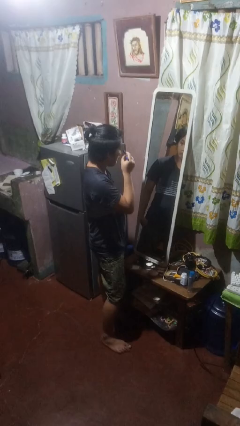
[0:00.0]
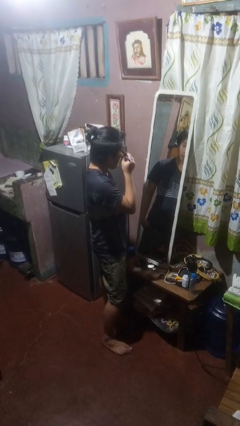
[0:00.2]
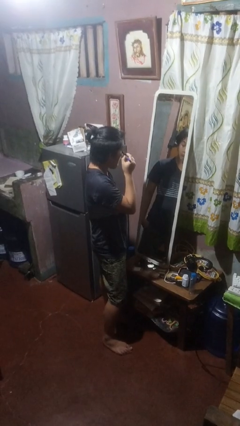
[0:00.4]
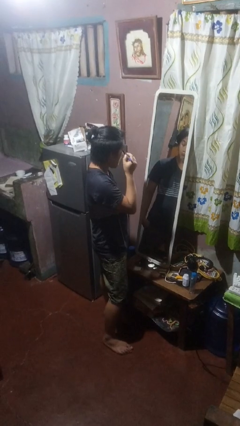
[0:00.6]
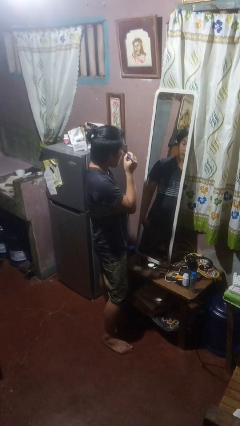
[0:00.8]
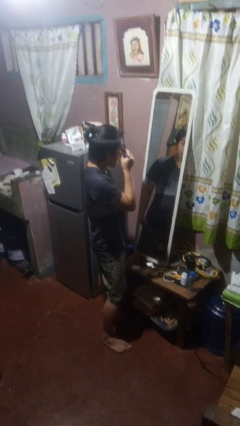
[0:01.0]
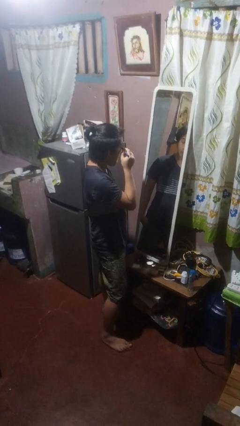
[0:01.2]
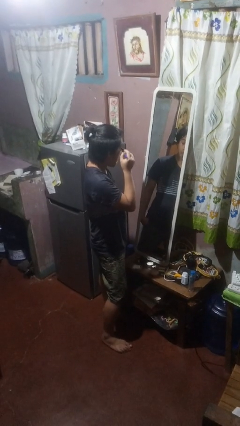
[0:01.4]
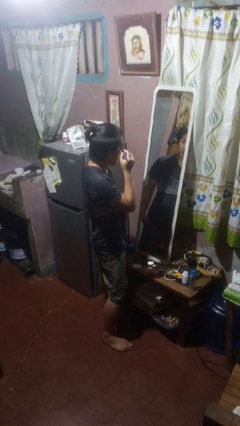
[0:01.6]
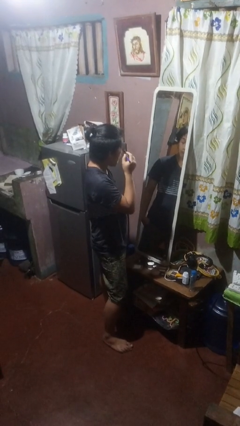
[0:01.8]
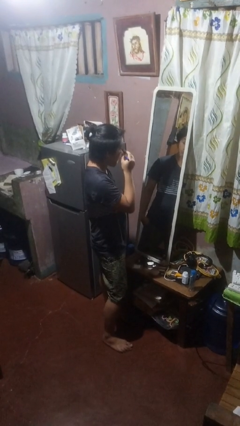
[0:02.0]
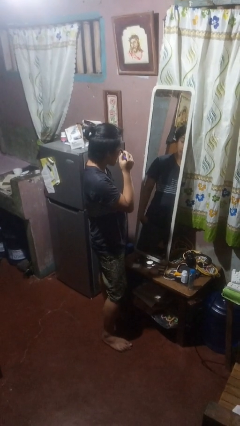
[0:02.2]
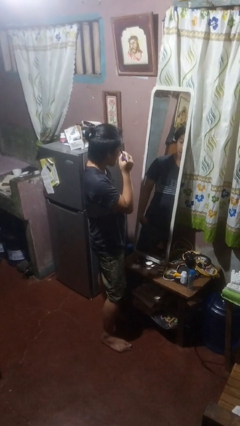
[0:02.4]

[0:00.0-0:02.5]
person applies eye makeup

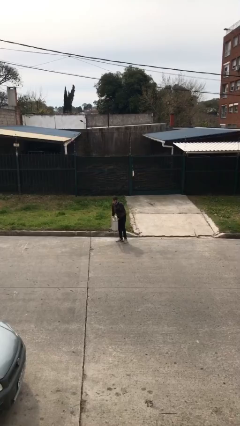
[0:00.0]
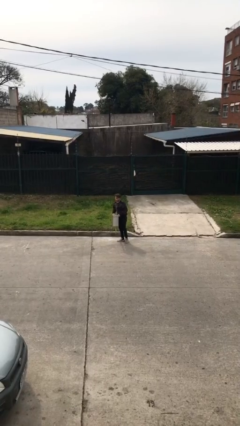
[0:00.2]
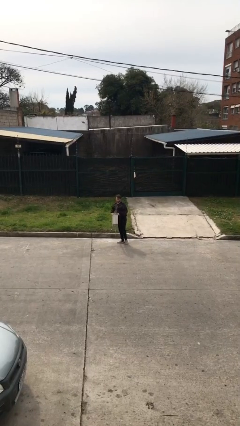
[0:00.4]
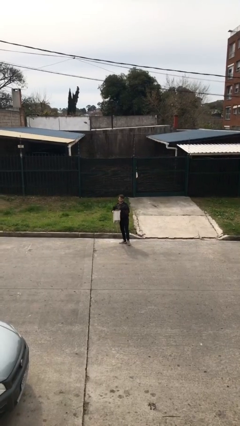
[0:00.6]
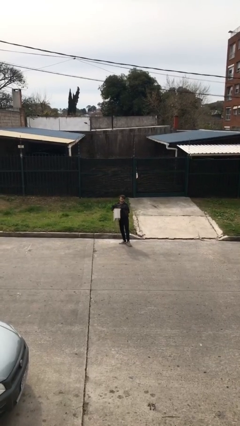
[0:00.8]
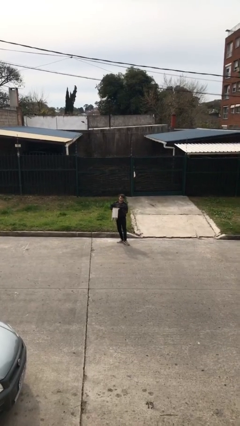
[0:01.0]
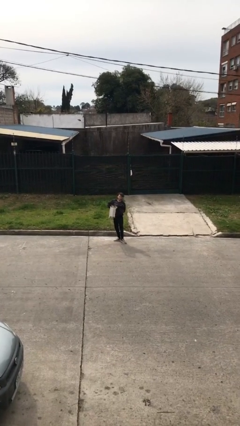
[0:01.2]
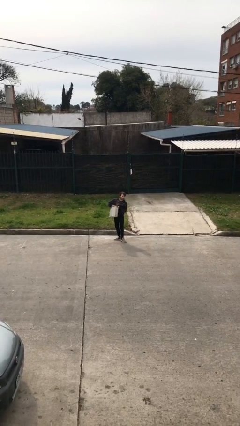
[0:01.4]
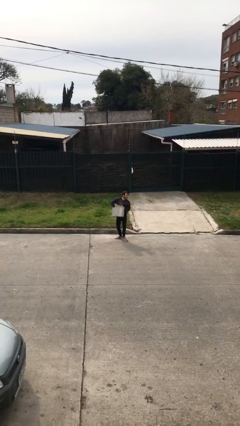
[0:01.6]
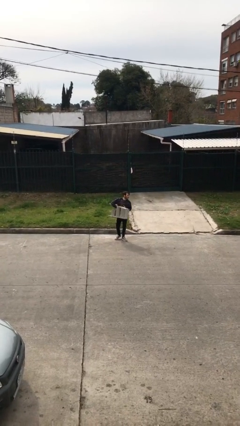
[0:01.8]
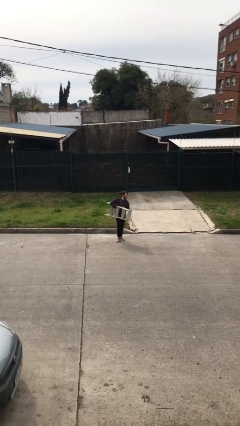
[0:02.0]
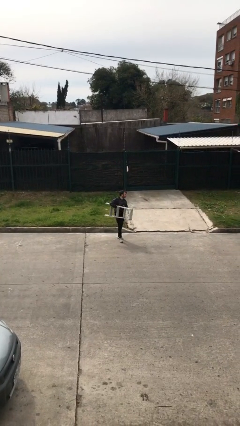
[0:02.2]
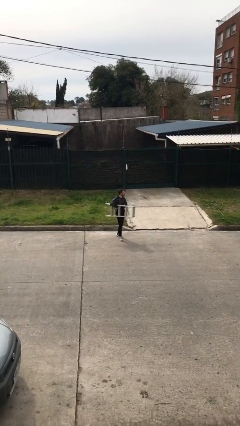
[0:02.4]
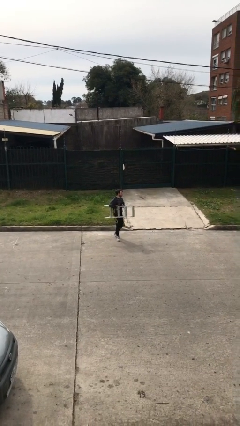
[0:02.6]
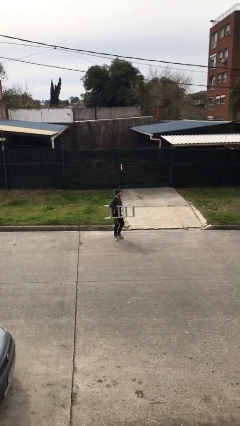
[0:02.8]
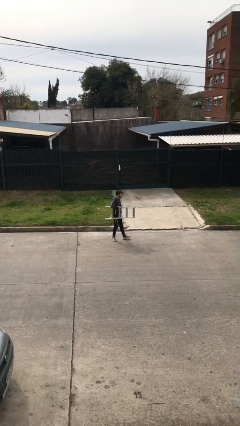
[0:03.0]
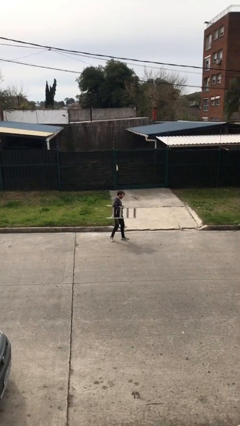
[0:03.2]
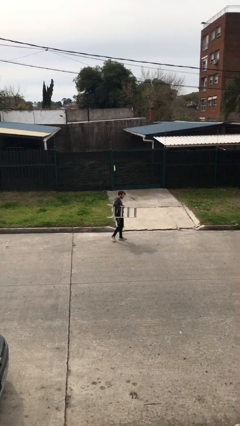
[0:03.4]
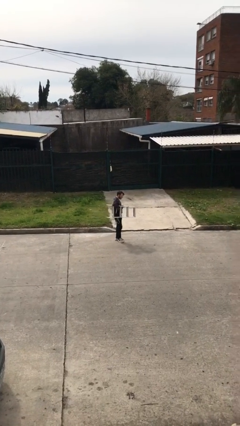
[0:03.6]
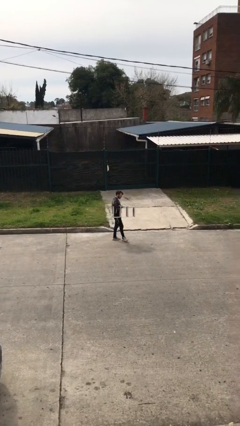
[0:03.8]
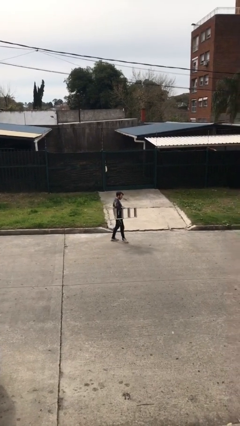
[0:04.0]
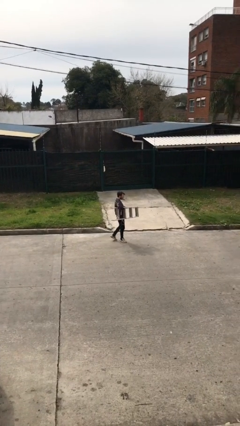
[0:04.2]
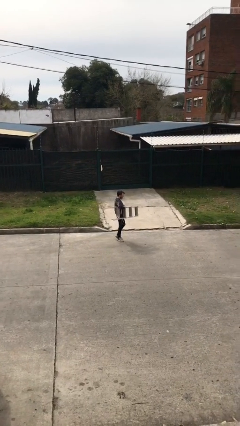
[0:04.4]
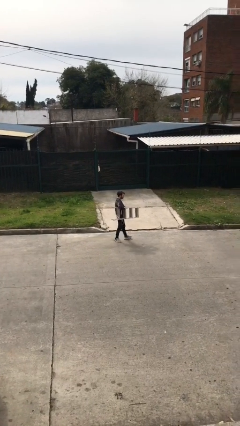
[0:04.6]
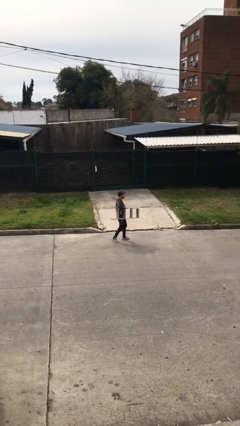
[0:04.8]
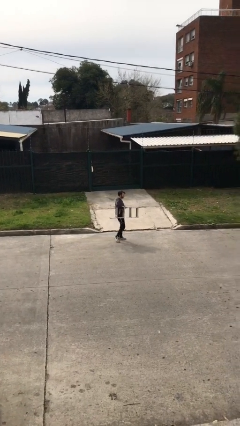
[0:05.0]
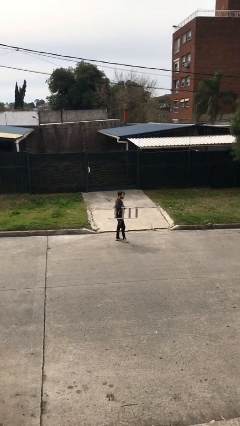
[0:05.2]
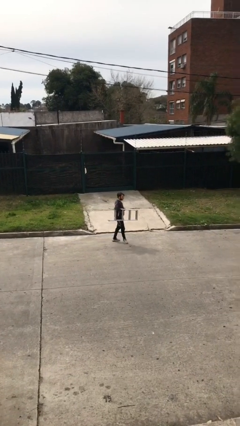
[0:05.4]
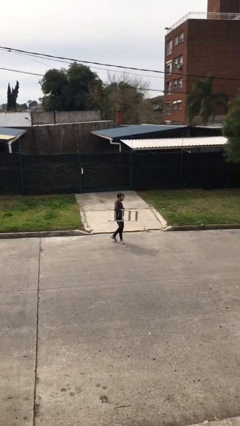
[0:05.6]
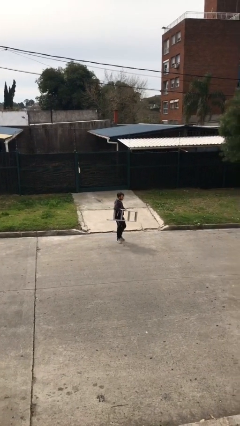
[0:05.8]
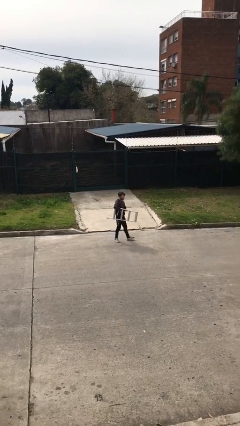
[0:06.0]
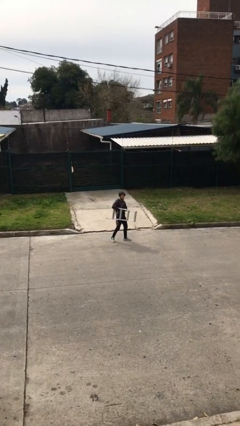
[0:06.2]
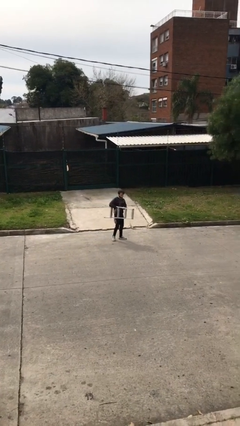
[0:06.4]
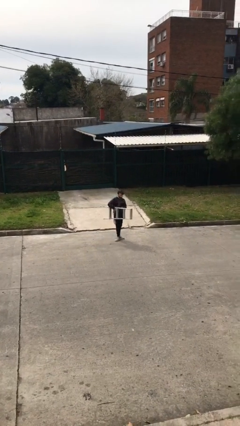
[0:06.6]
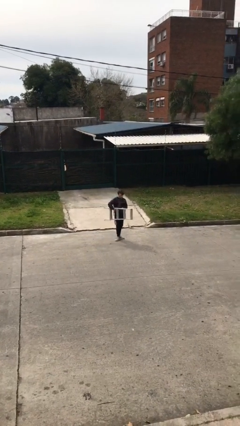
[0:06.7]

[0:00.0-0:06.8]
person carries heavy object

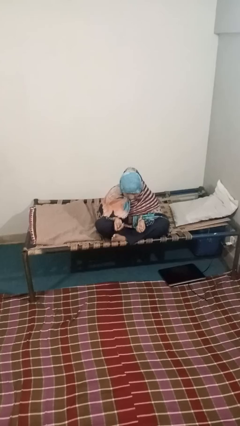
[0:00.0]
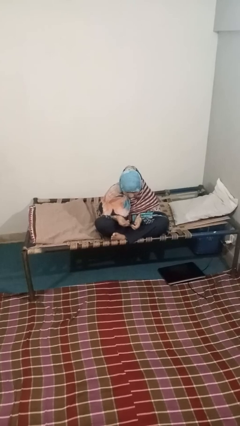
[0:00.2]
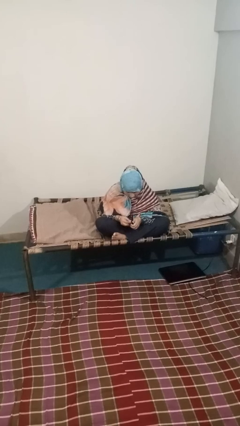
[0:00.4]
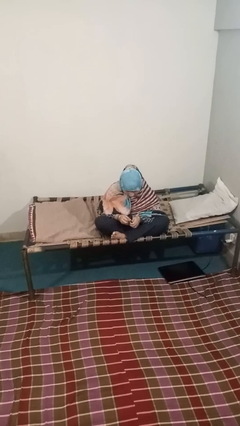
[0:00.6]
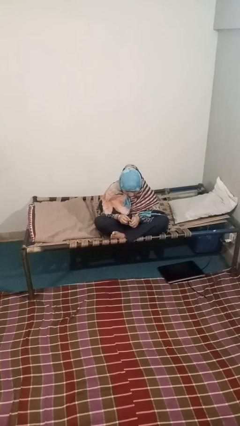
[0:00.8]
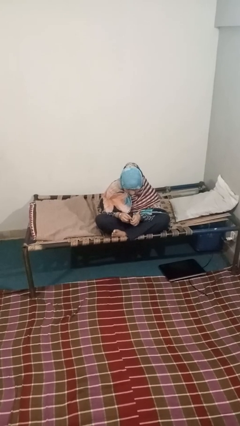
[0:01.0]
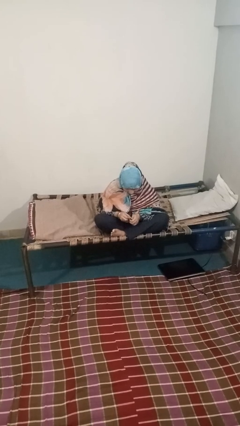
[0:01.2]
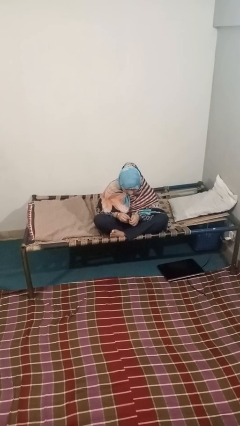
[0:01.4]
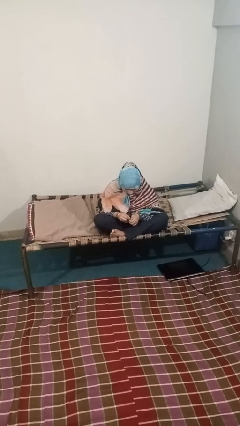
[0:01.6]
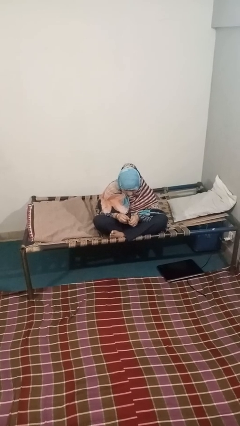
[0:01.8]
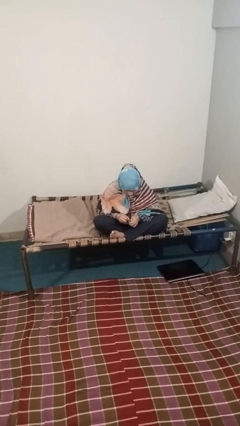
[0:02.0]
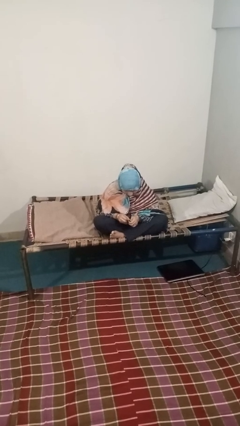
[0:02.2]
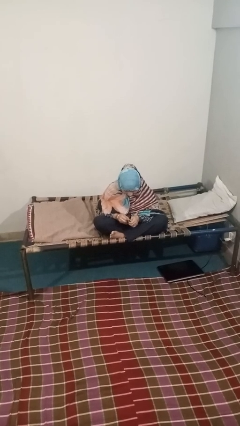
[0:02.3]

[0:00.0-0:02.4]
person files fingernails

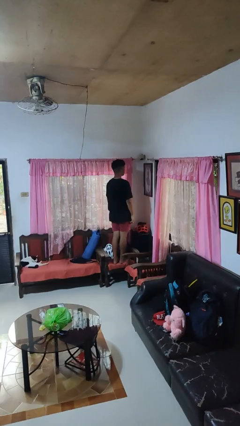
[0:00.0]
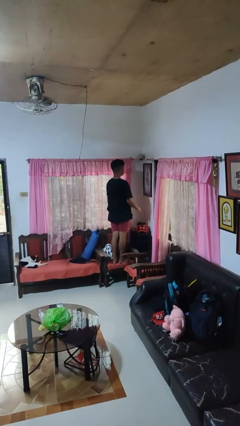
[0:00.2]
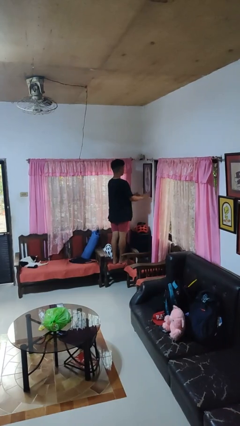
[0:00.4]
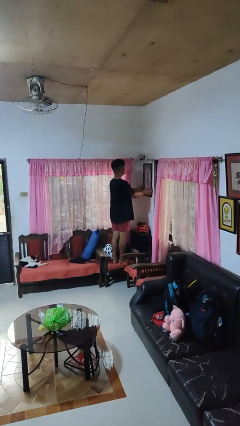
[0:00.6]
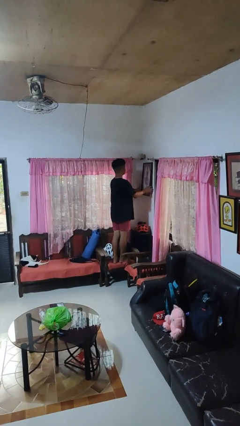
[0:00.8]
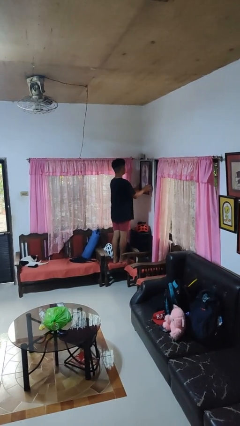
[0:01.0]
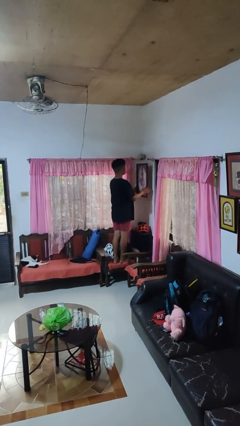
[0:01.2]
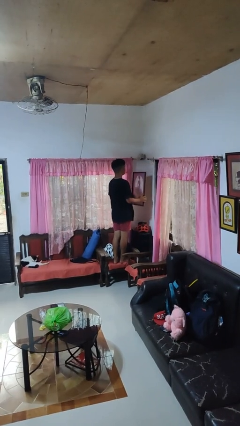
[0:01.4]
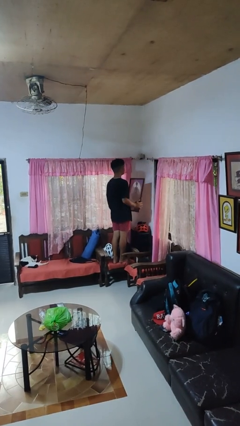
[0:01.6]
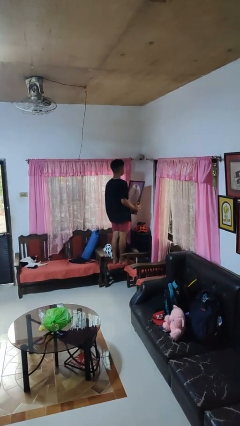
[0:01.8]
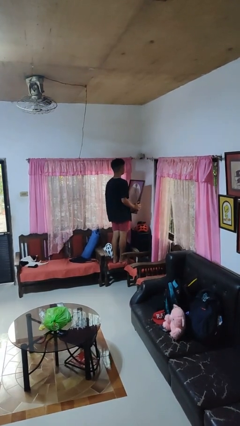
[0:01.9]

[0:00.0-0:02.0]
person takes down picture frame

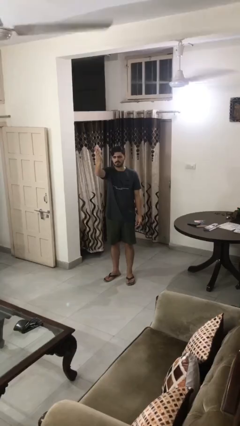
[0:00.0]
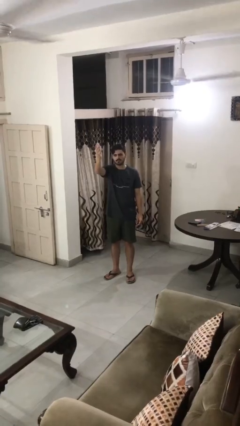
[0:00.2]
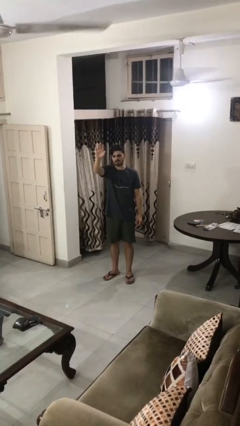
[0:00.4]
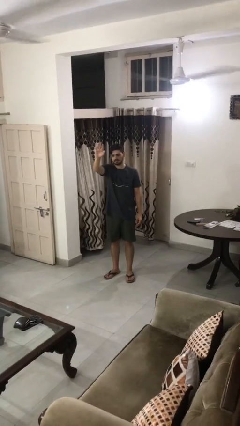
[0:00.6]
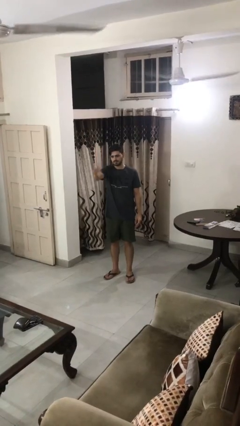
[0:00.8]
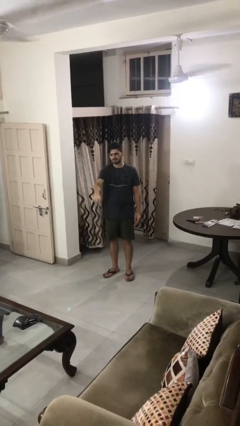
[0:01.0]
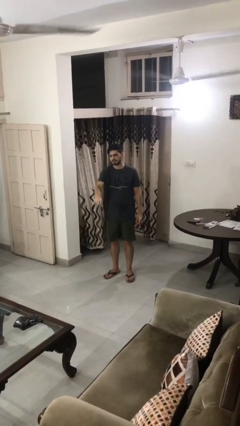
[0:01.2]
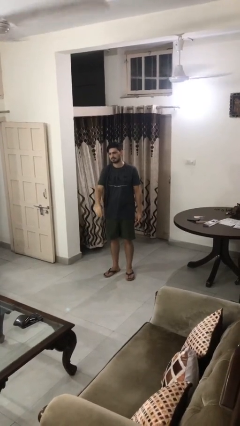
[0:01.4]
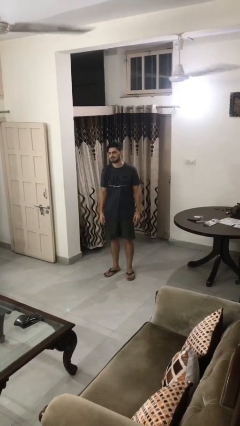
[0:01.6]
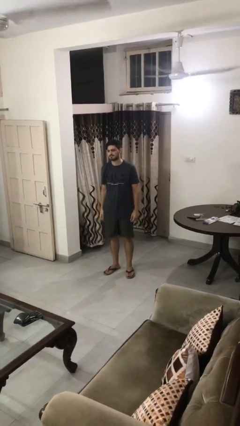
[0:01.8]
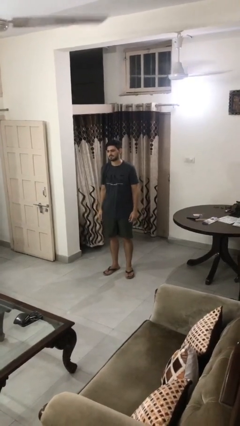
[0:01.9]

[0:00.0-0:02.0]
person gestures swipe down

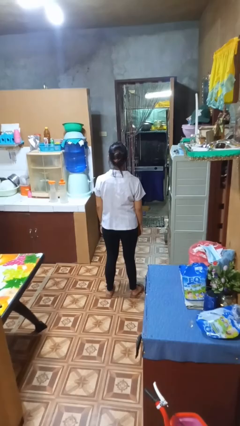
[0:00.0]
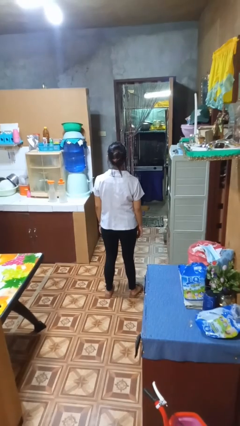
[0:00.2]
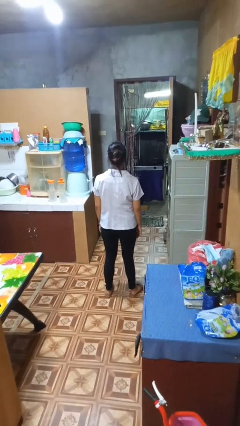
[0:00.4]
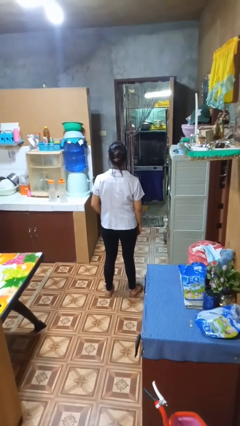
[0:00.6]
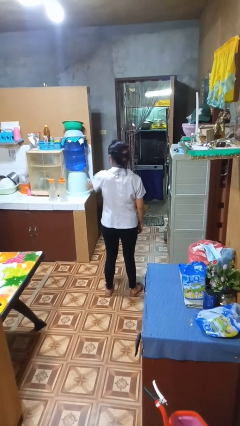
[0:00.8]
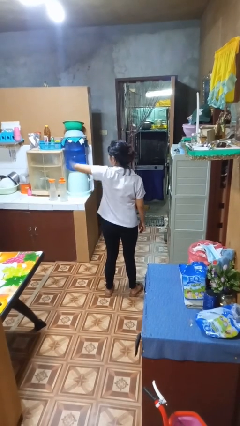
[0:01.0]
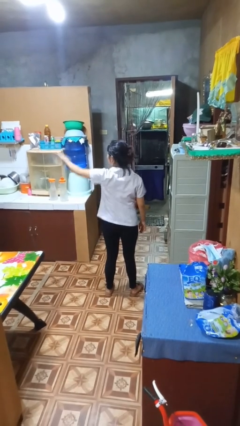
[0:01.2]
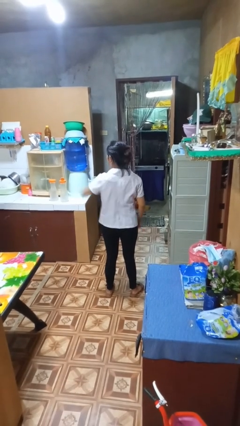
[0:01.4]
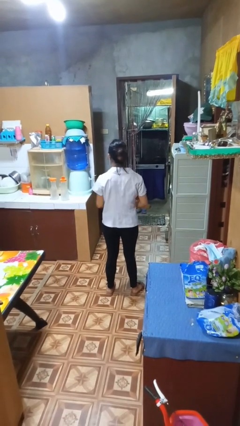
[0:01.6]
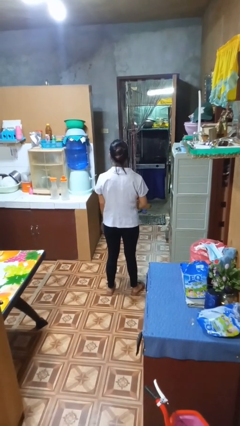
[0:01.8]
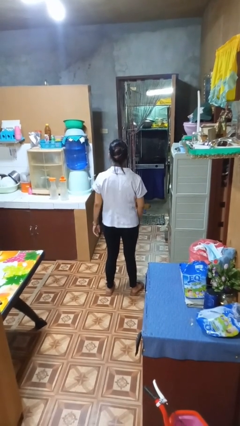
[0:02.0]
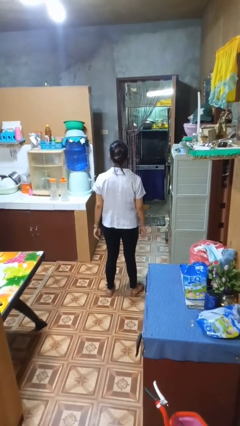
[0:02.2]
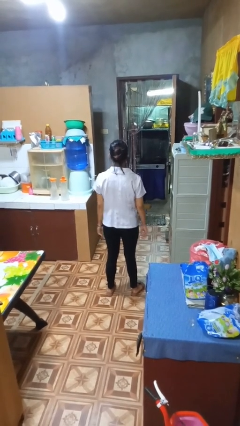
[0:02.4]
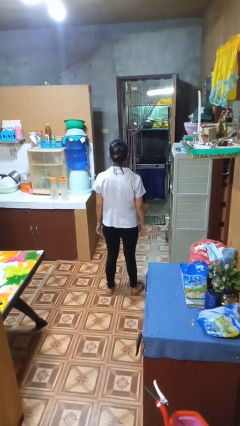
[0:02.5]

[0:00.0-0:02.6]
person karate chop
